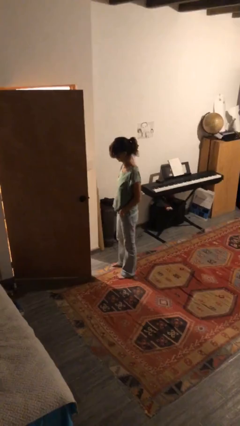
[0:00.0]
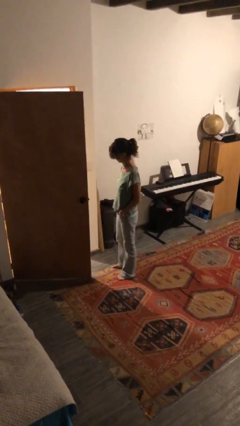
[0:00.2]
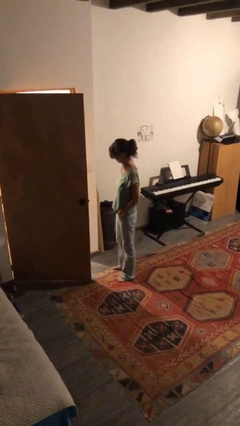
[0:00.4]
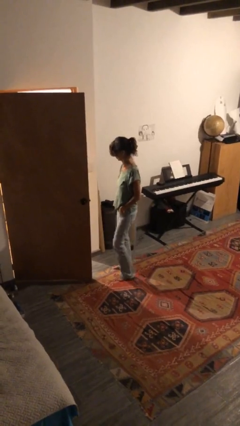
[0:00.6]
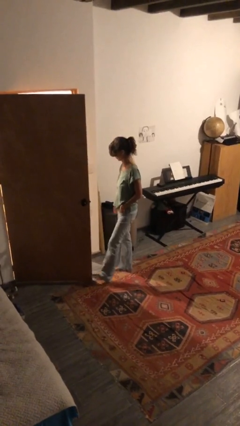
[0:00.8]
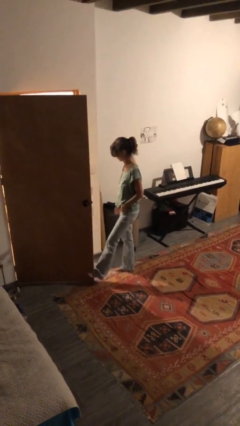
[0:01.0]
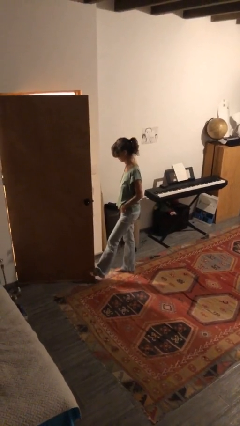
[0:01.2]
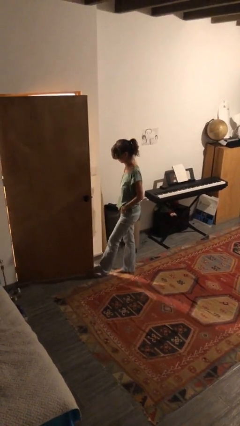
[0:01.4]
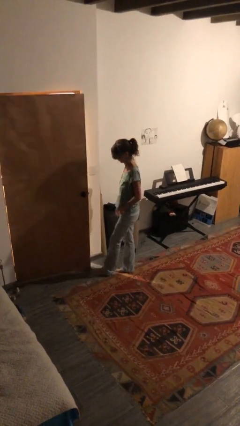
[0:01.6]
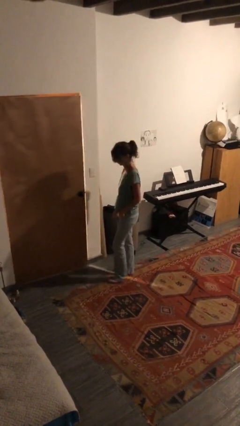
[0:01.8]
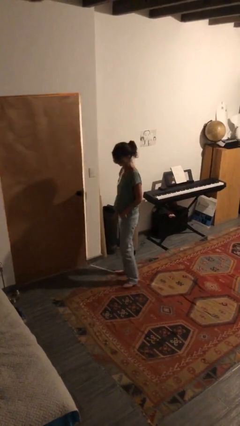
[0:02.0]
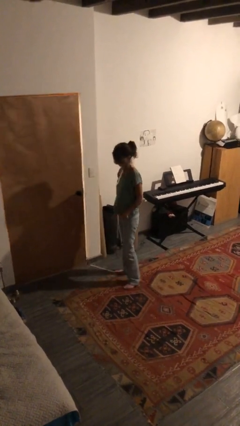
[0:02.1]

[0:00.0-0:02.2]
person closes door with foot

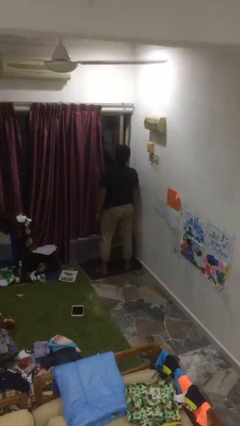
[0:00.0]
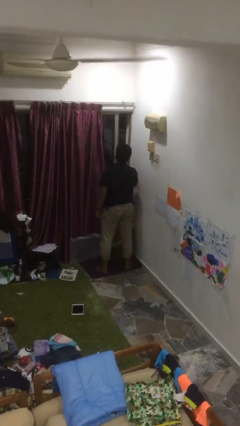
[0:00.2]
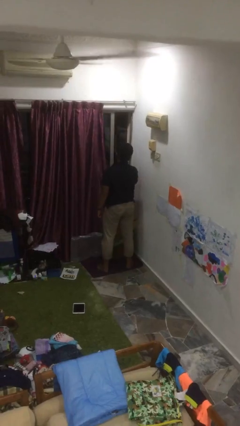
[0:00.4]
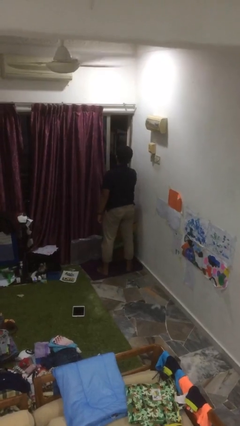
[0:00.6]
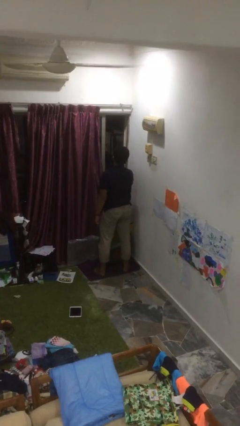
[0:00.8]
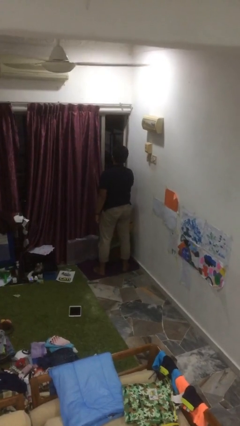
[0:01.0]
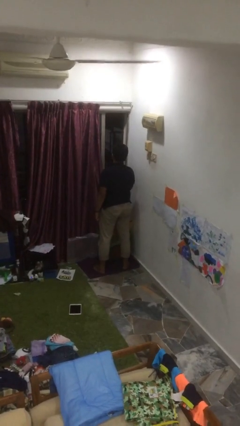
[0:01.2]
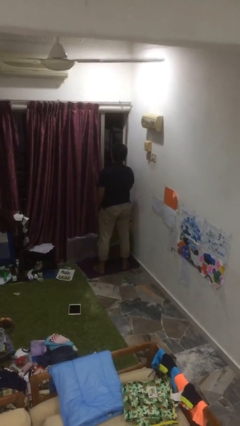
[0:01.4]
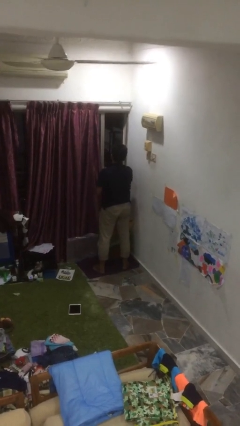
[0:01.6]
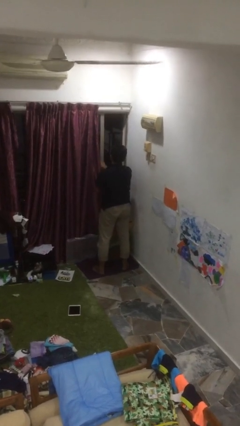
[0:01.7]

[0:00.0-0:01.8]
person opens home window

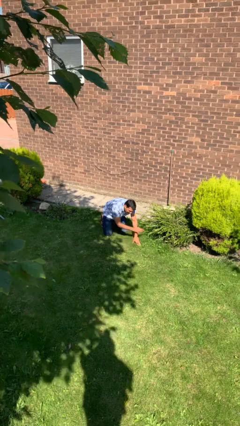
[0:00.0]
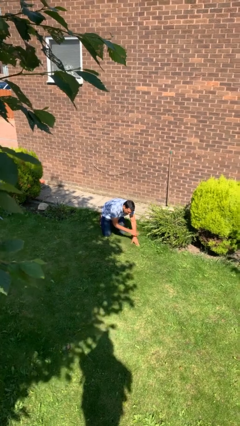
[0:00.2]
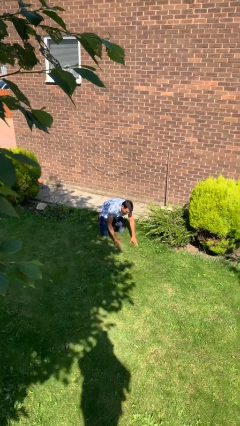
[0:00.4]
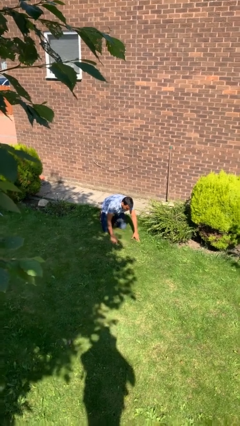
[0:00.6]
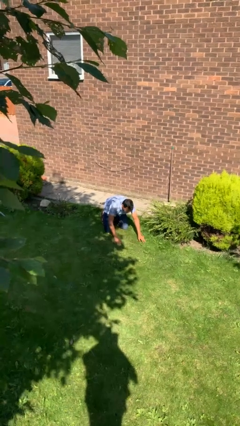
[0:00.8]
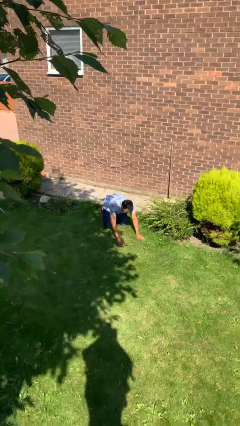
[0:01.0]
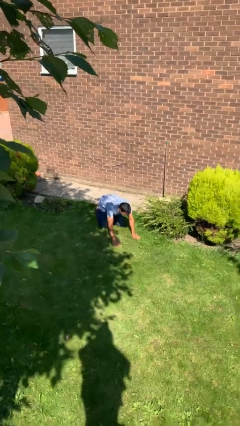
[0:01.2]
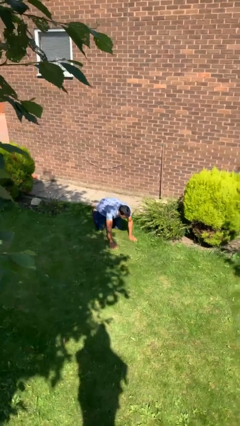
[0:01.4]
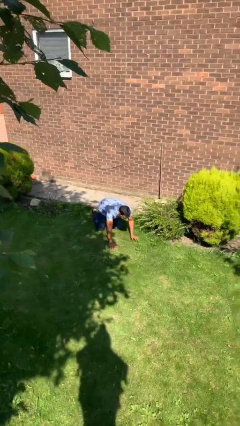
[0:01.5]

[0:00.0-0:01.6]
person crawls

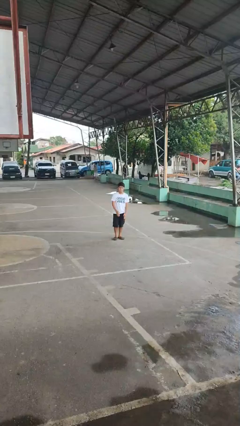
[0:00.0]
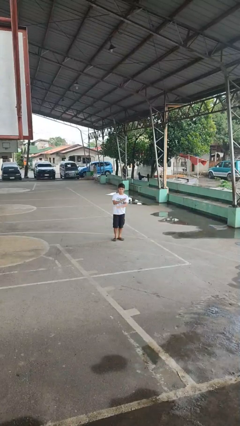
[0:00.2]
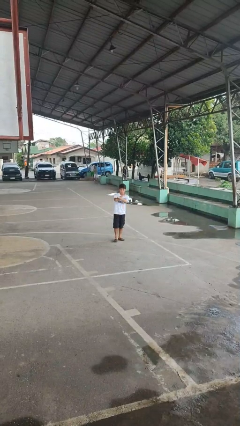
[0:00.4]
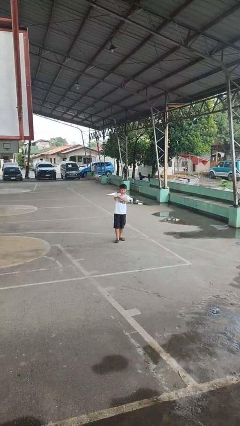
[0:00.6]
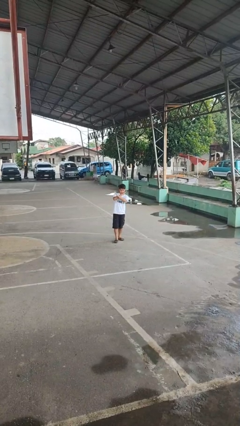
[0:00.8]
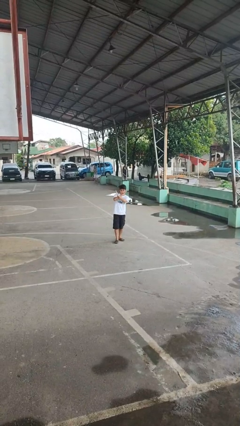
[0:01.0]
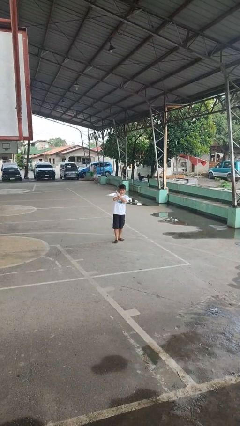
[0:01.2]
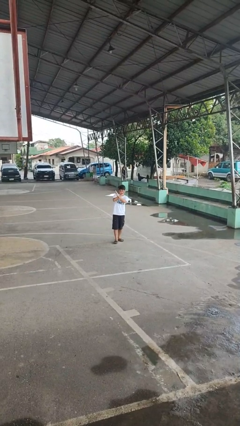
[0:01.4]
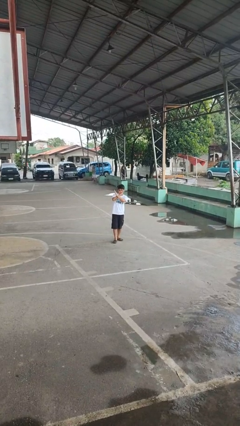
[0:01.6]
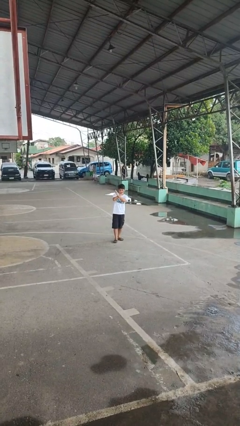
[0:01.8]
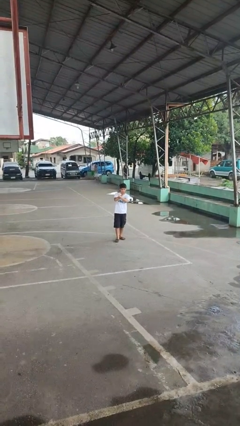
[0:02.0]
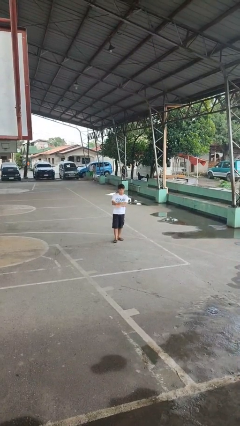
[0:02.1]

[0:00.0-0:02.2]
person gestures arms x

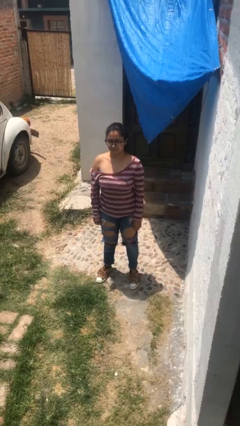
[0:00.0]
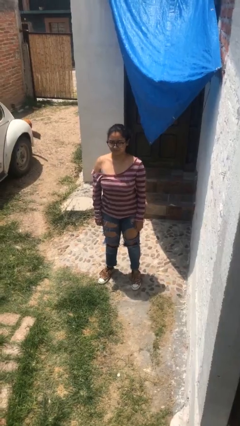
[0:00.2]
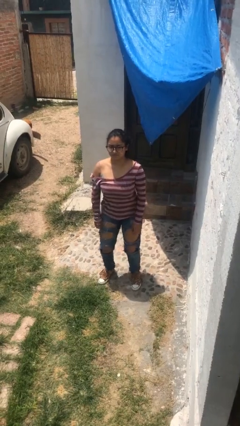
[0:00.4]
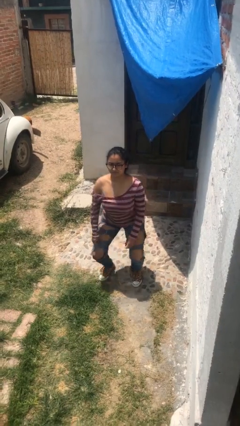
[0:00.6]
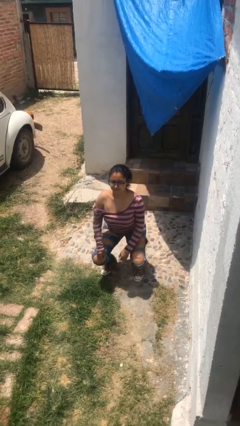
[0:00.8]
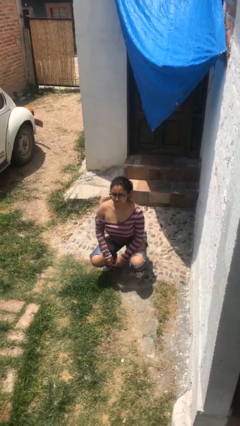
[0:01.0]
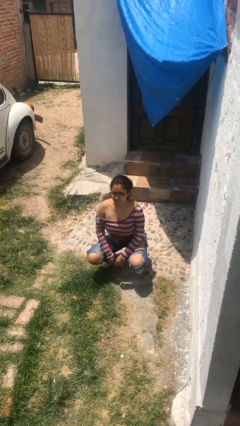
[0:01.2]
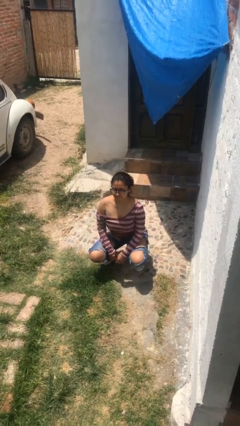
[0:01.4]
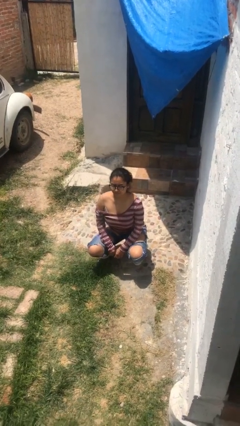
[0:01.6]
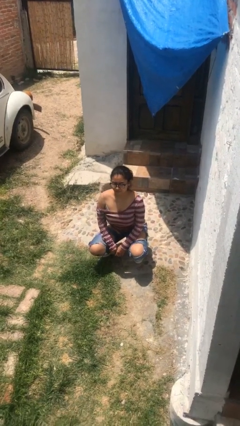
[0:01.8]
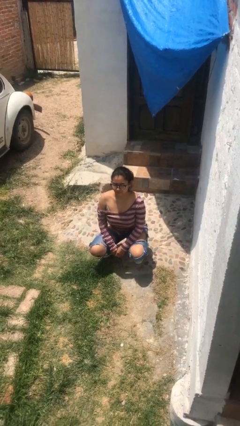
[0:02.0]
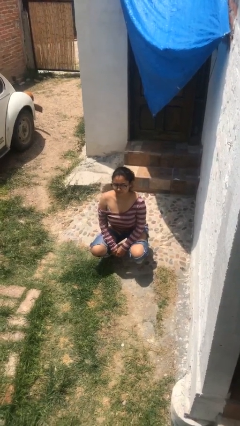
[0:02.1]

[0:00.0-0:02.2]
person squats

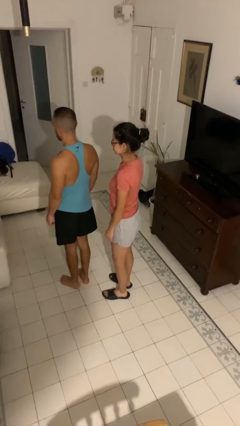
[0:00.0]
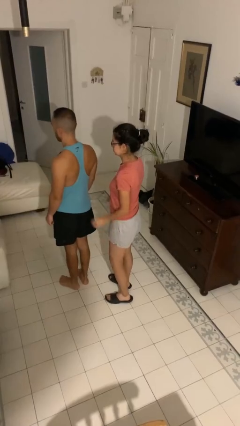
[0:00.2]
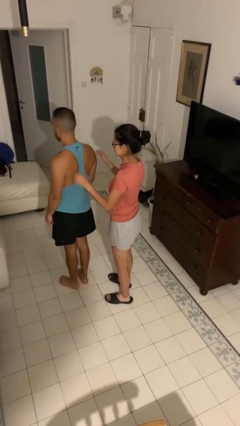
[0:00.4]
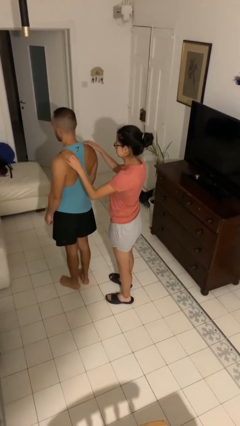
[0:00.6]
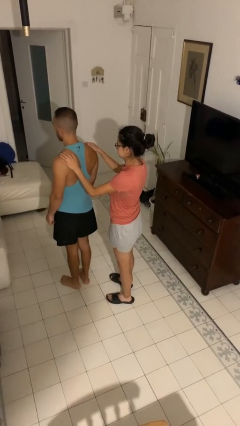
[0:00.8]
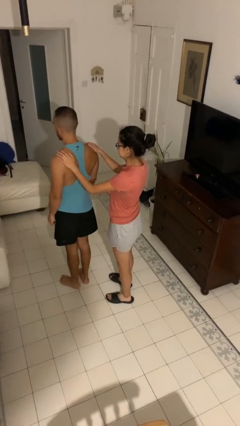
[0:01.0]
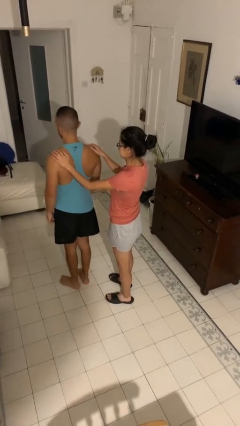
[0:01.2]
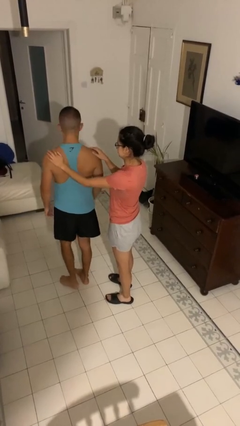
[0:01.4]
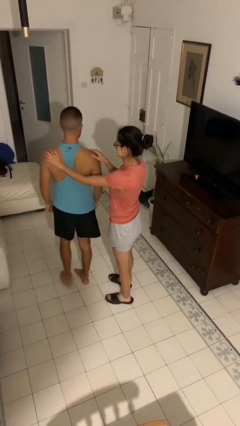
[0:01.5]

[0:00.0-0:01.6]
person grabs person by shoulder

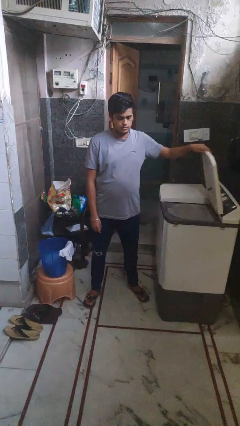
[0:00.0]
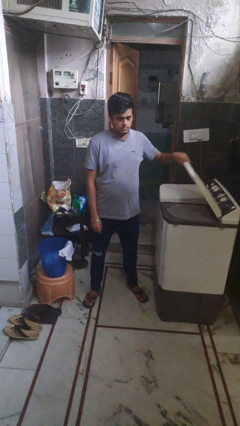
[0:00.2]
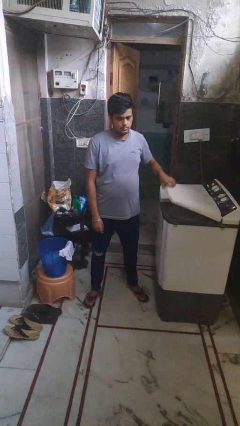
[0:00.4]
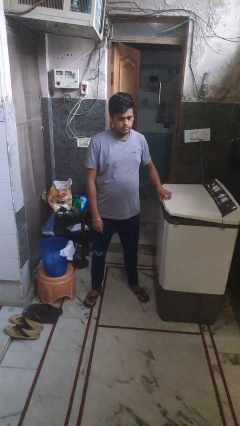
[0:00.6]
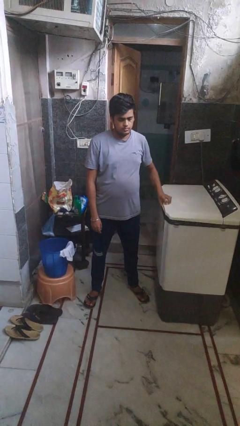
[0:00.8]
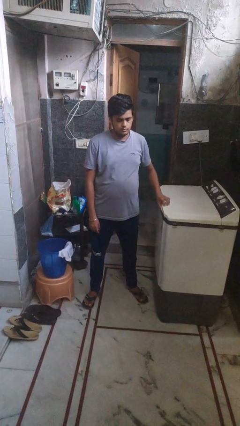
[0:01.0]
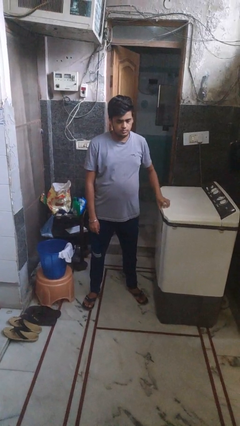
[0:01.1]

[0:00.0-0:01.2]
person closes clothes washer

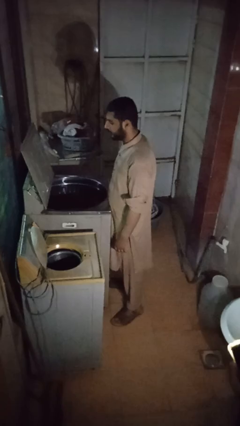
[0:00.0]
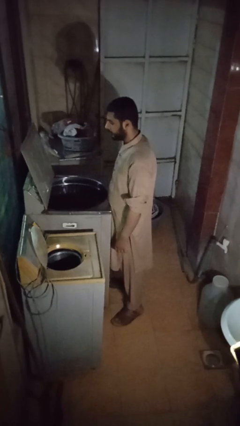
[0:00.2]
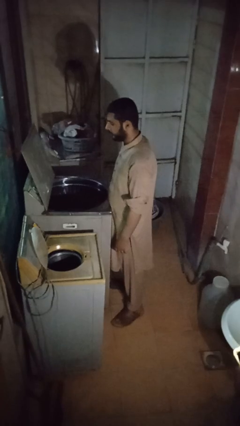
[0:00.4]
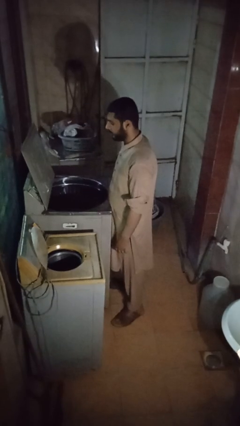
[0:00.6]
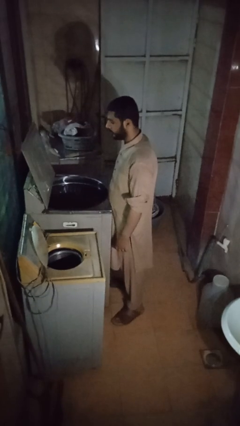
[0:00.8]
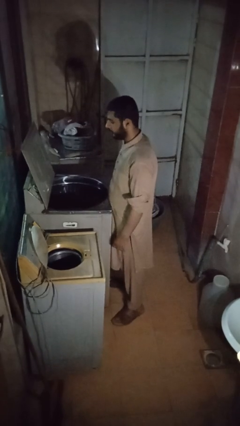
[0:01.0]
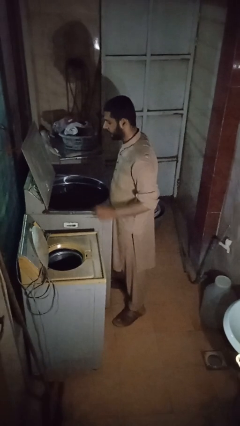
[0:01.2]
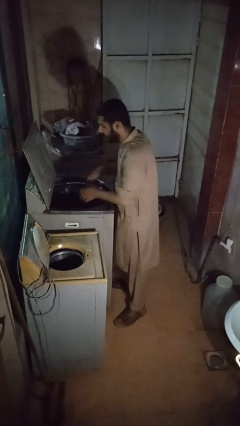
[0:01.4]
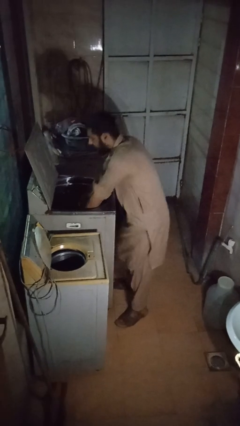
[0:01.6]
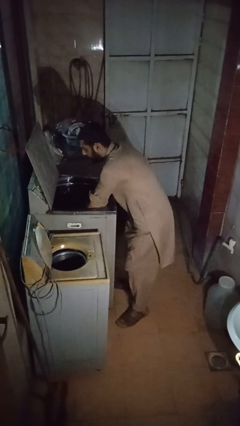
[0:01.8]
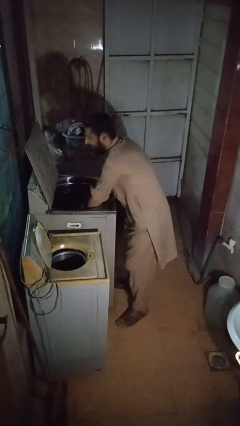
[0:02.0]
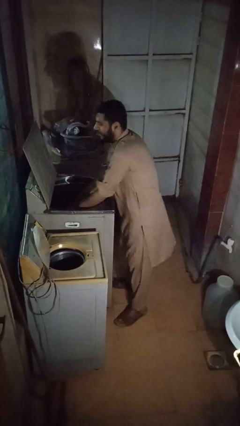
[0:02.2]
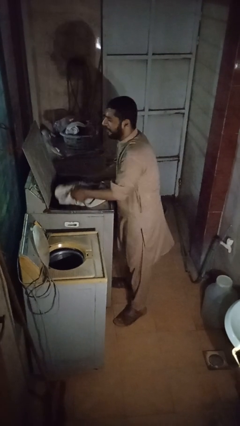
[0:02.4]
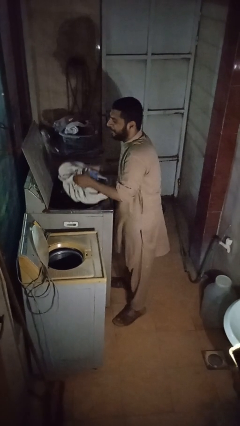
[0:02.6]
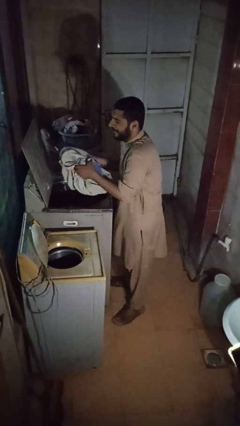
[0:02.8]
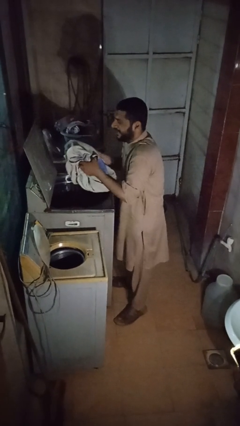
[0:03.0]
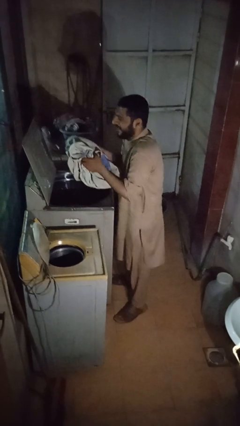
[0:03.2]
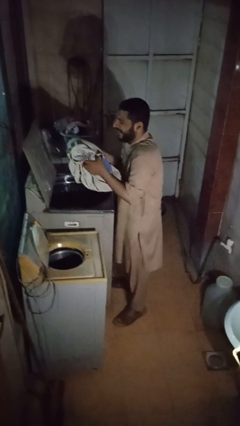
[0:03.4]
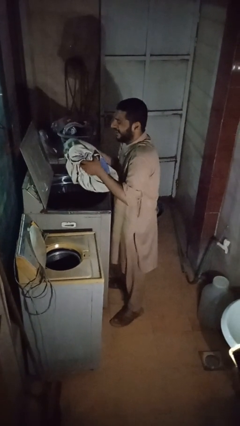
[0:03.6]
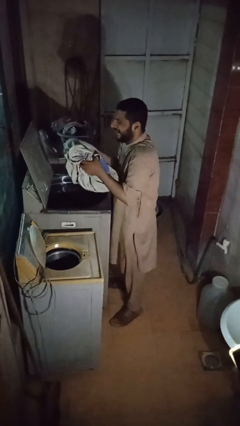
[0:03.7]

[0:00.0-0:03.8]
person unloads clotheswasher
